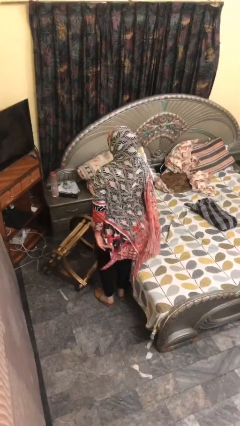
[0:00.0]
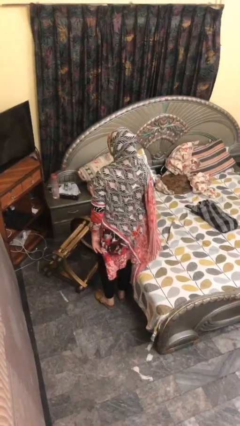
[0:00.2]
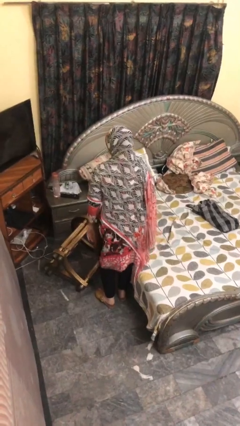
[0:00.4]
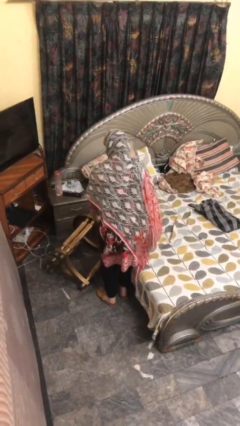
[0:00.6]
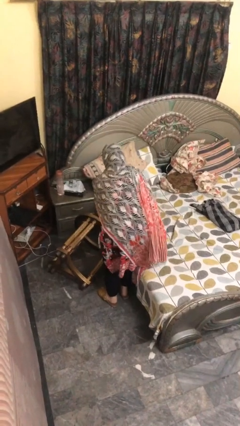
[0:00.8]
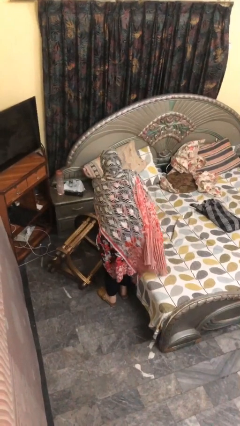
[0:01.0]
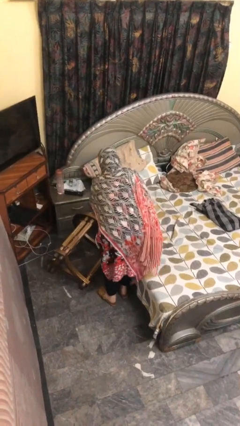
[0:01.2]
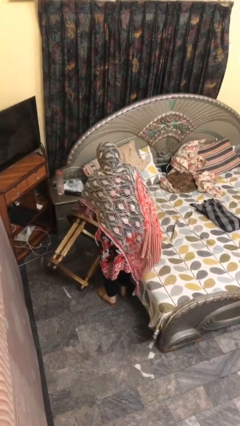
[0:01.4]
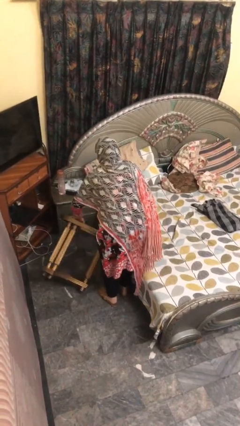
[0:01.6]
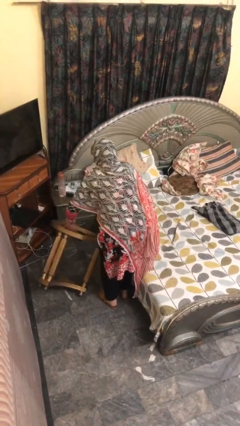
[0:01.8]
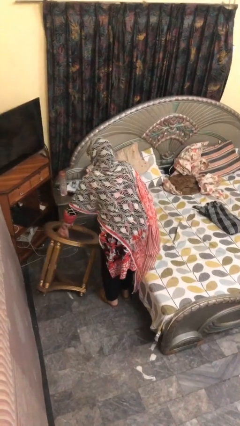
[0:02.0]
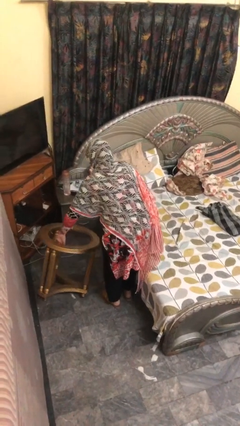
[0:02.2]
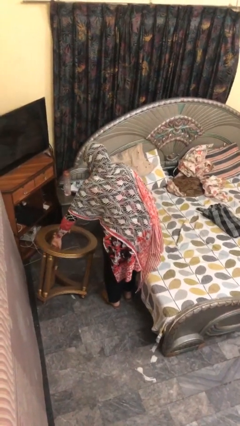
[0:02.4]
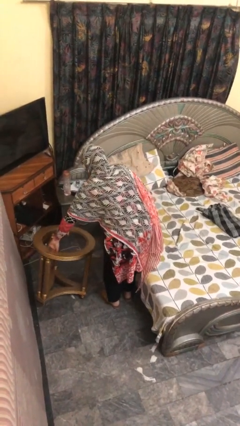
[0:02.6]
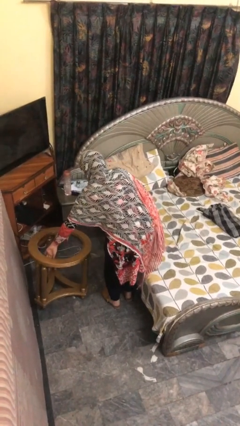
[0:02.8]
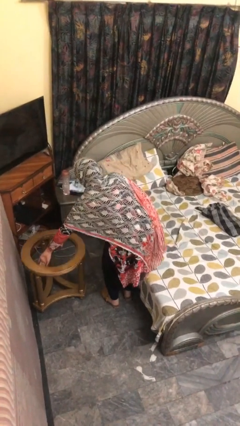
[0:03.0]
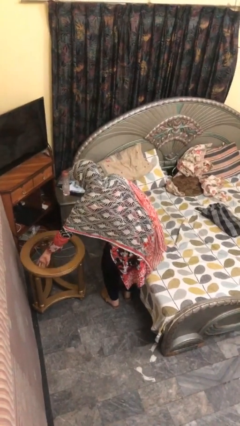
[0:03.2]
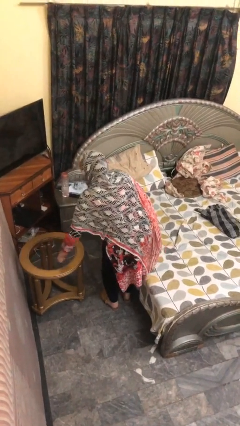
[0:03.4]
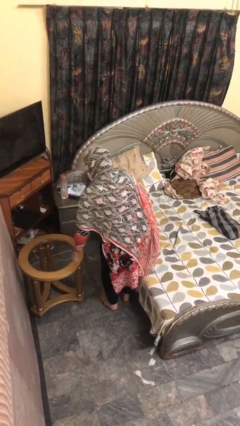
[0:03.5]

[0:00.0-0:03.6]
person sets upright furniture

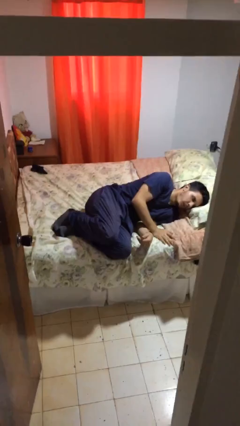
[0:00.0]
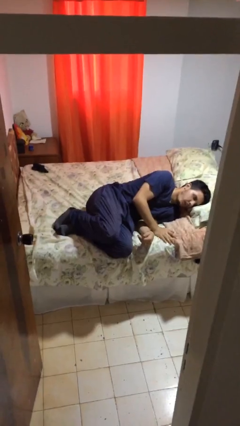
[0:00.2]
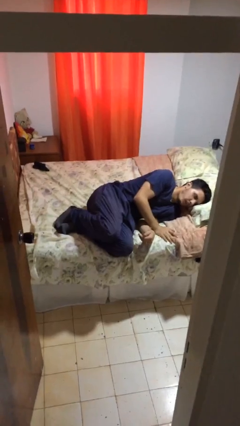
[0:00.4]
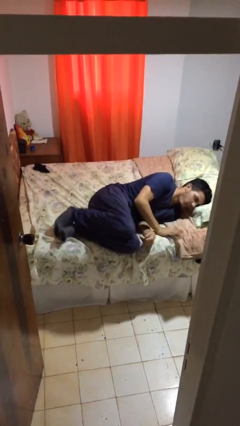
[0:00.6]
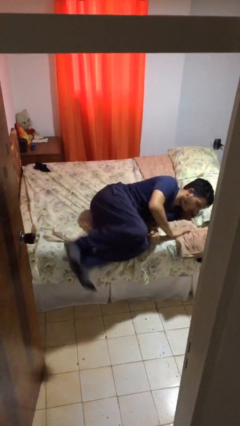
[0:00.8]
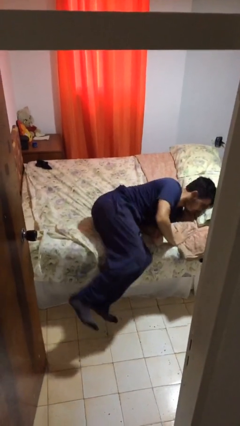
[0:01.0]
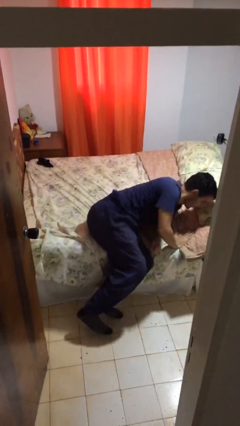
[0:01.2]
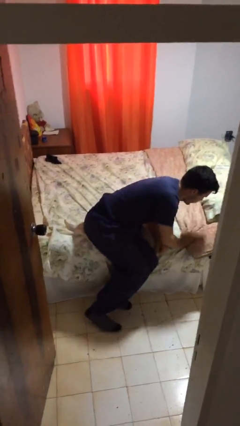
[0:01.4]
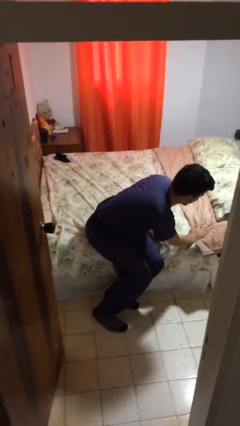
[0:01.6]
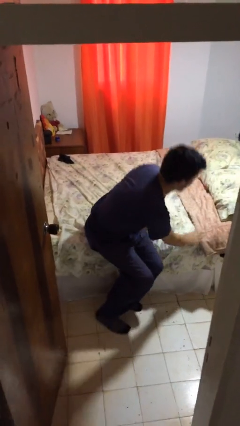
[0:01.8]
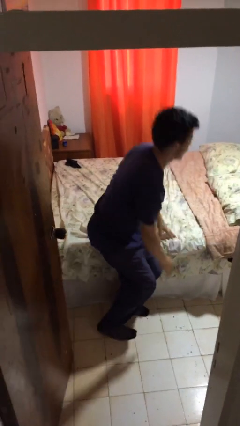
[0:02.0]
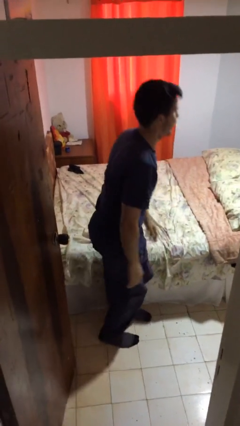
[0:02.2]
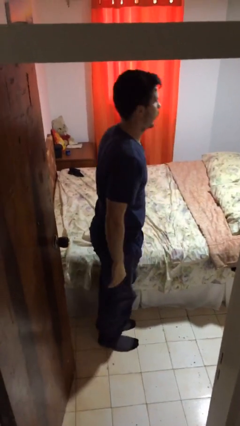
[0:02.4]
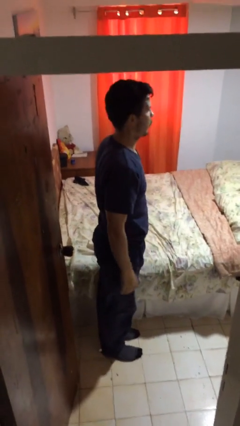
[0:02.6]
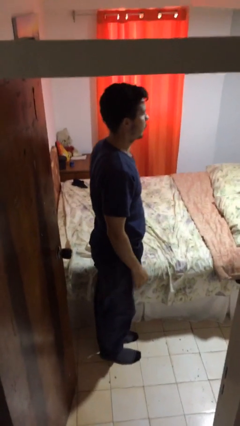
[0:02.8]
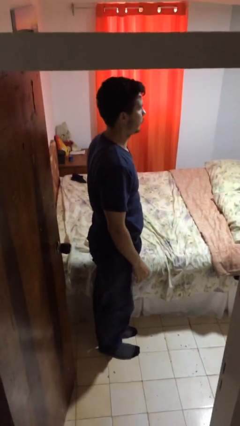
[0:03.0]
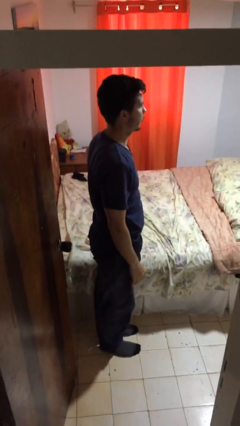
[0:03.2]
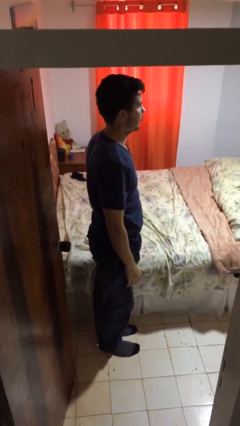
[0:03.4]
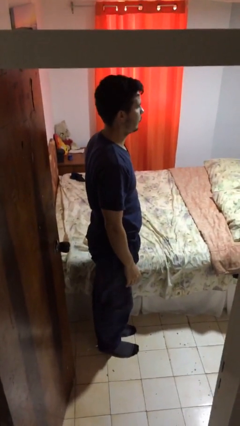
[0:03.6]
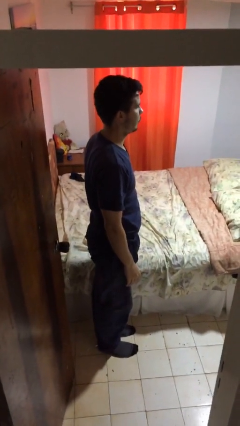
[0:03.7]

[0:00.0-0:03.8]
person stands up

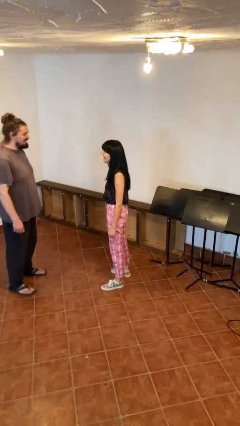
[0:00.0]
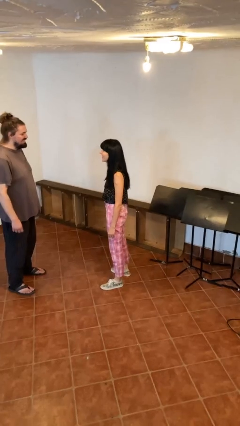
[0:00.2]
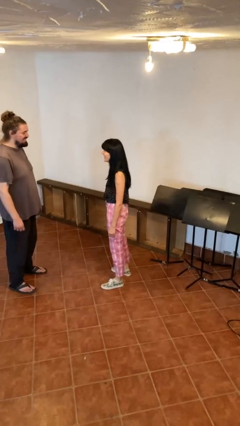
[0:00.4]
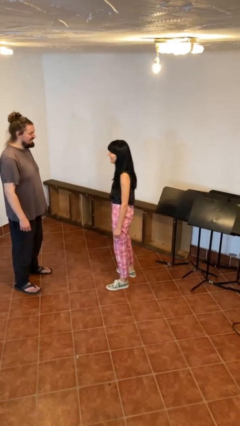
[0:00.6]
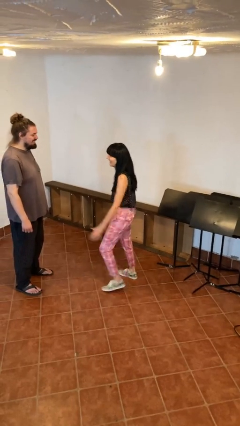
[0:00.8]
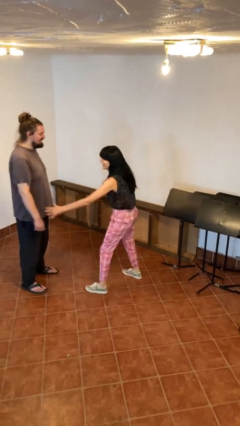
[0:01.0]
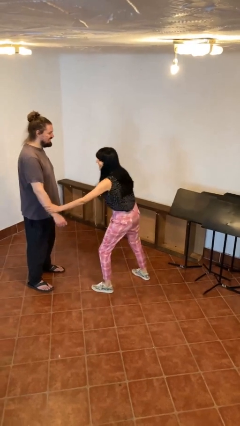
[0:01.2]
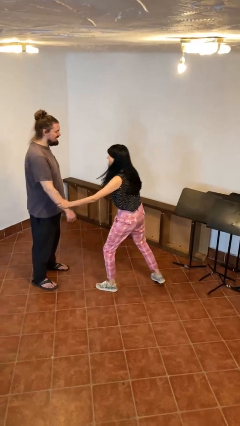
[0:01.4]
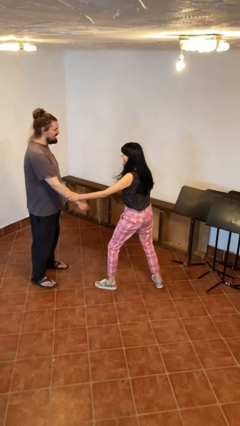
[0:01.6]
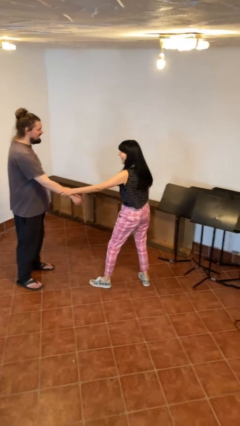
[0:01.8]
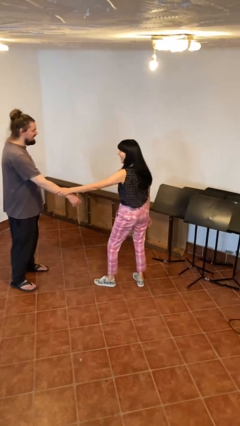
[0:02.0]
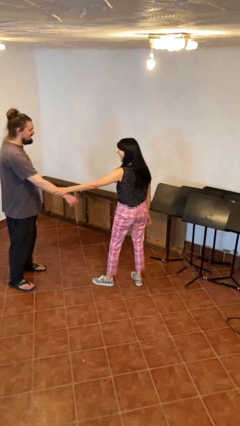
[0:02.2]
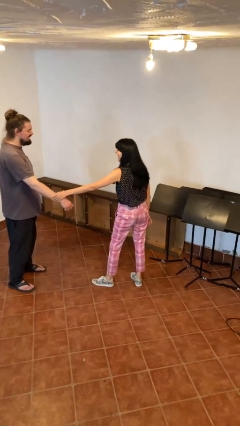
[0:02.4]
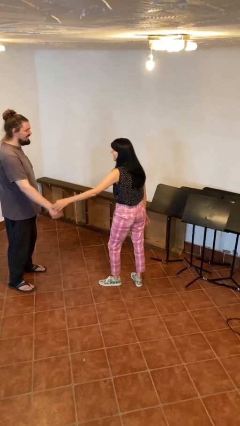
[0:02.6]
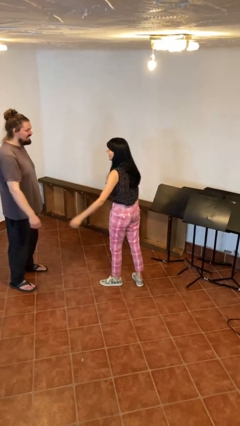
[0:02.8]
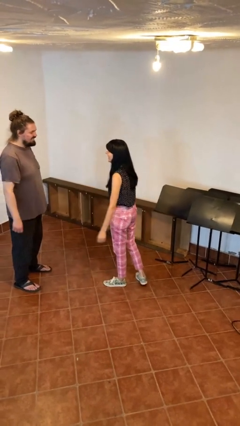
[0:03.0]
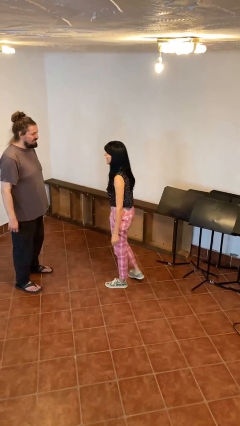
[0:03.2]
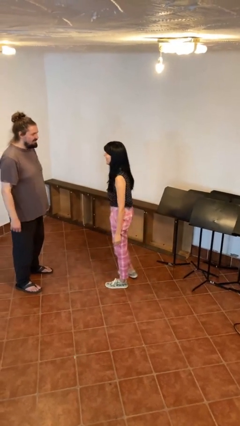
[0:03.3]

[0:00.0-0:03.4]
person grabs person by forearm

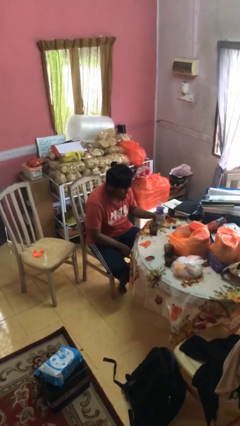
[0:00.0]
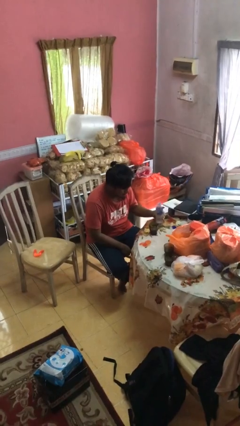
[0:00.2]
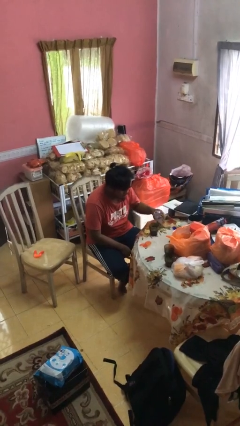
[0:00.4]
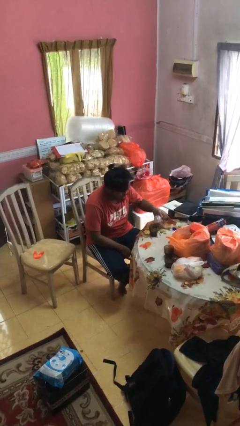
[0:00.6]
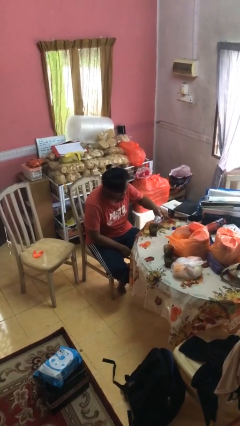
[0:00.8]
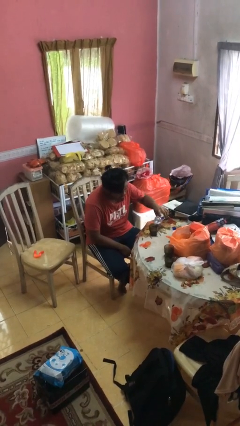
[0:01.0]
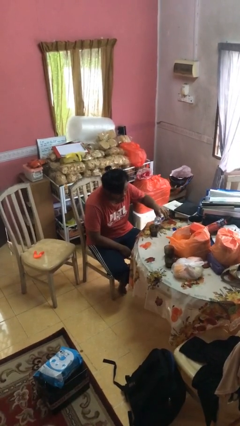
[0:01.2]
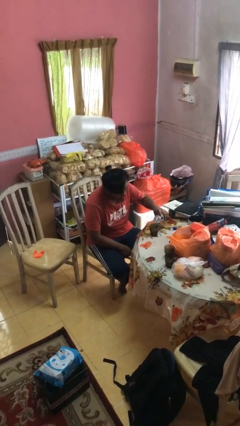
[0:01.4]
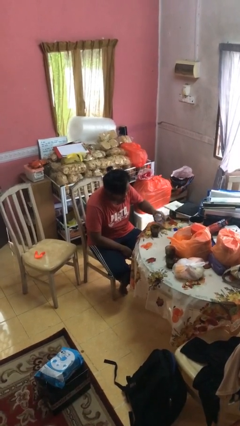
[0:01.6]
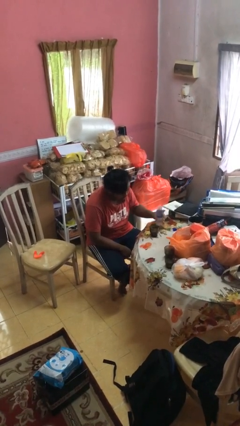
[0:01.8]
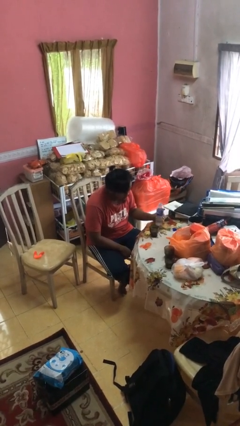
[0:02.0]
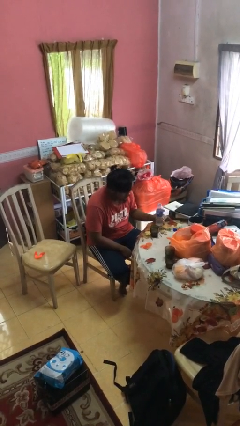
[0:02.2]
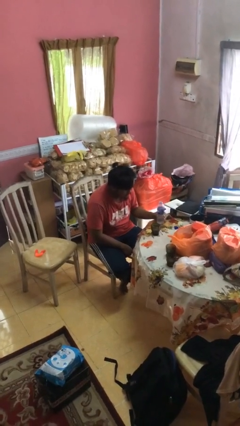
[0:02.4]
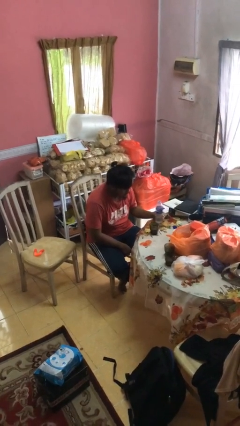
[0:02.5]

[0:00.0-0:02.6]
person pours liquid into cup

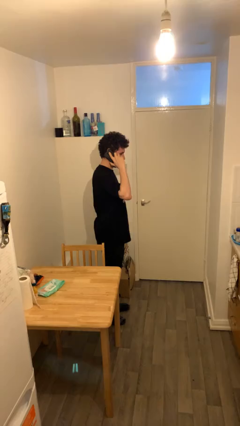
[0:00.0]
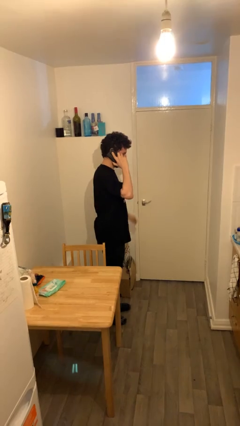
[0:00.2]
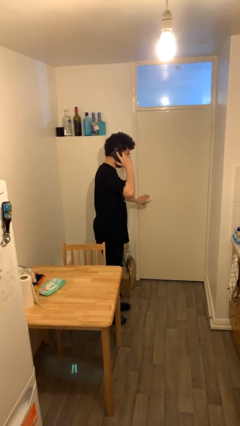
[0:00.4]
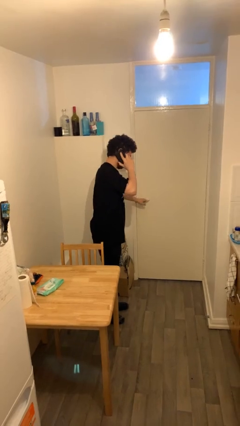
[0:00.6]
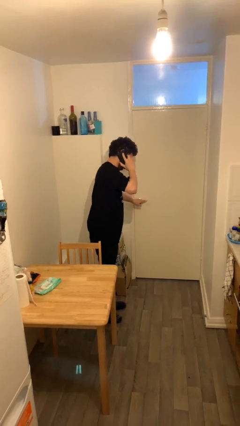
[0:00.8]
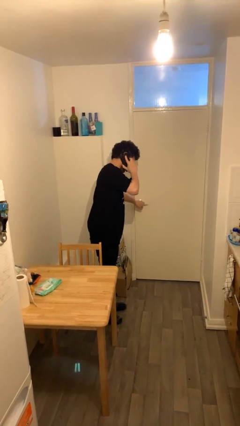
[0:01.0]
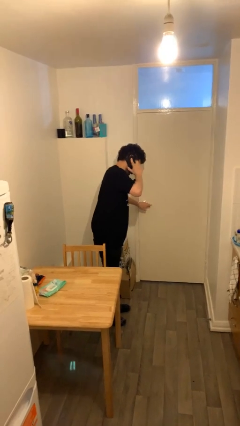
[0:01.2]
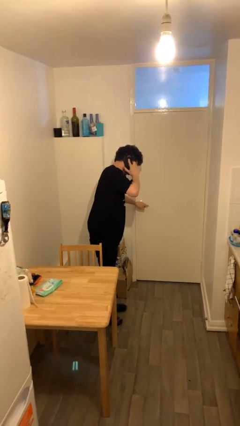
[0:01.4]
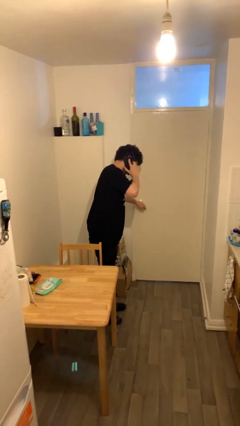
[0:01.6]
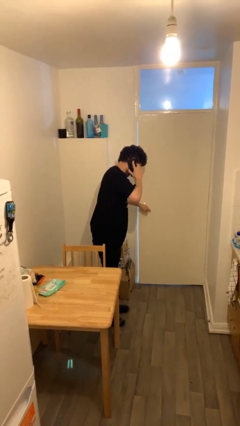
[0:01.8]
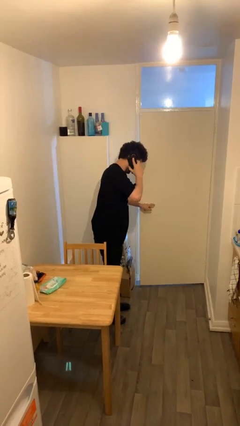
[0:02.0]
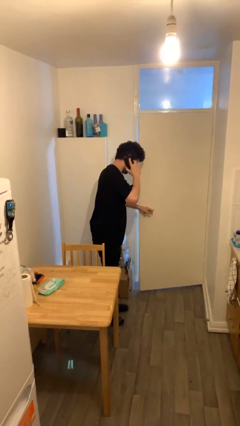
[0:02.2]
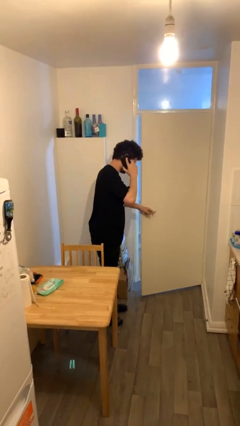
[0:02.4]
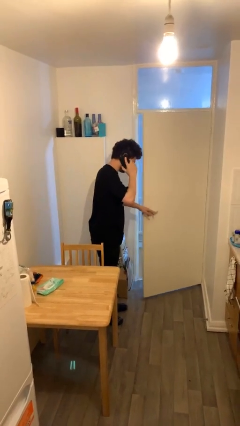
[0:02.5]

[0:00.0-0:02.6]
person opens facility door

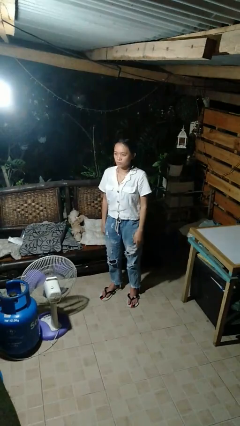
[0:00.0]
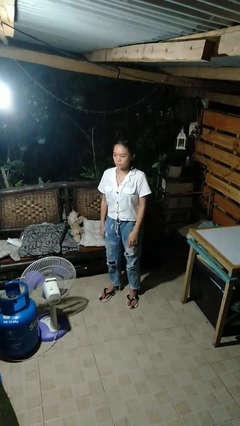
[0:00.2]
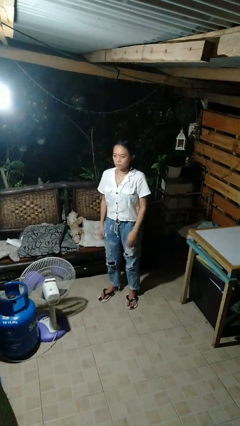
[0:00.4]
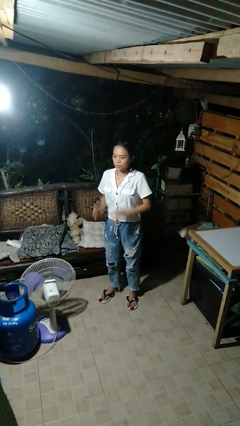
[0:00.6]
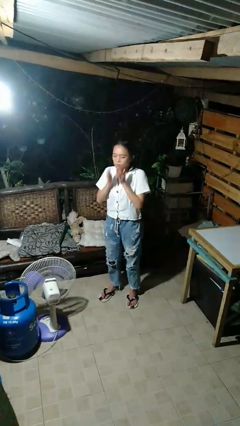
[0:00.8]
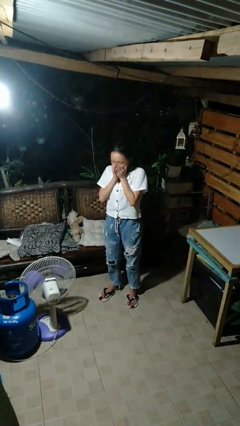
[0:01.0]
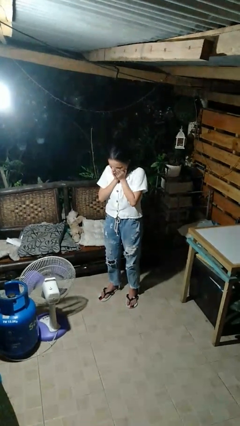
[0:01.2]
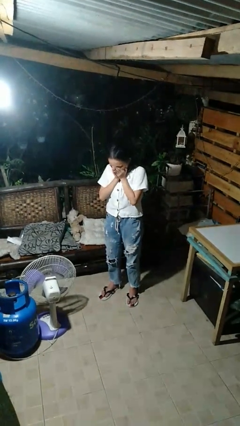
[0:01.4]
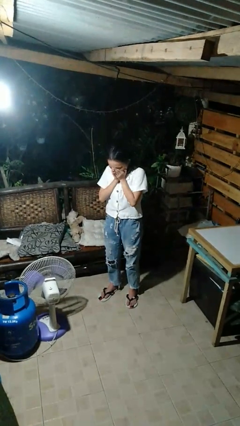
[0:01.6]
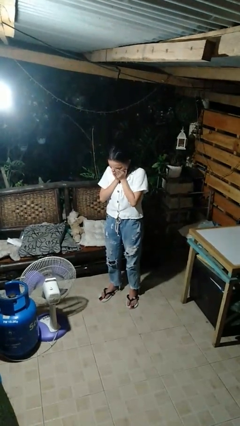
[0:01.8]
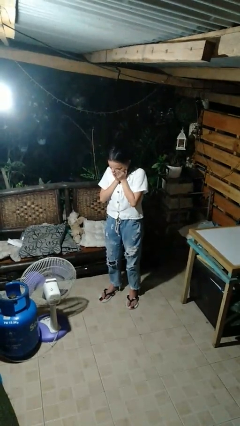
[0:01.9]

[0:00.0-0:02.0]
person sneezes into hand
